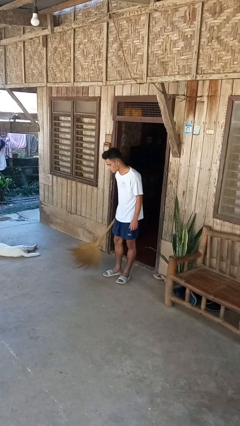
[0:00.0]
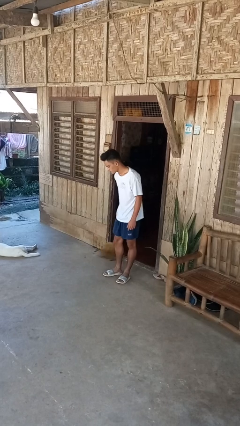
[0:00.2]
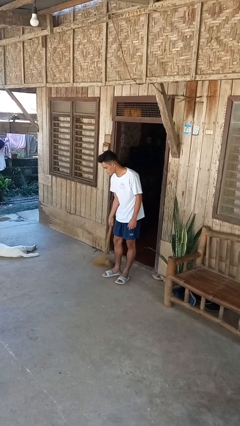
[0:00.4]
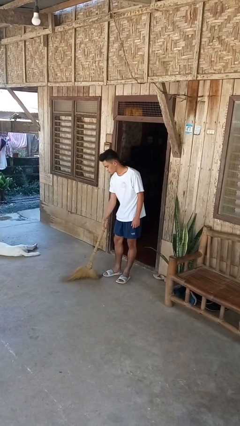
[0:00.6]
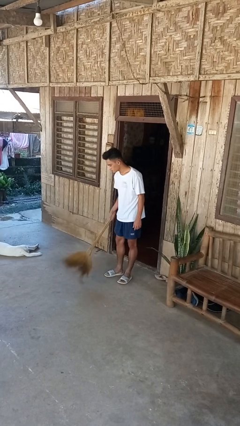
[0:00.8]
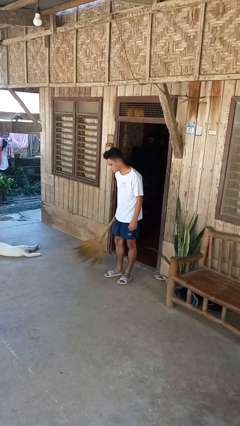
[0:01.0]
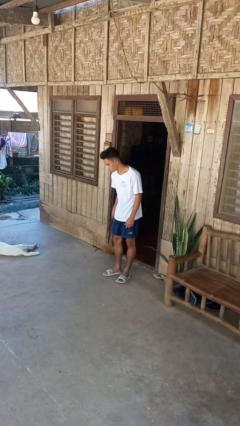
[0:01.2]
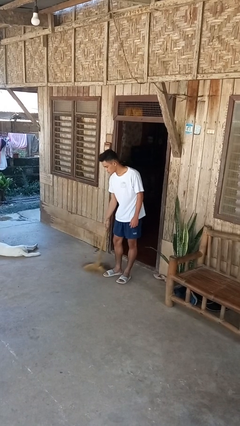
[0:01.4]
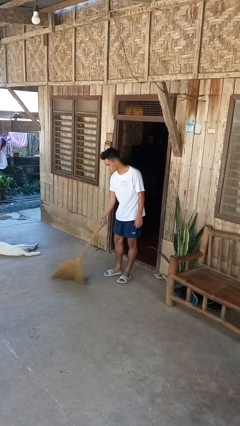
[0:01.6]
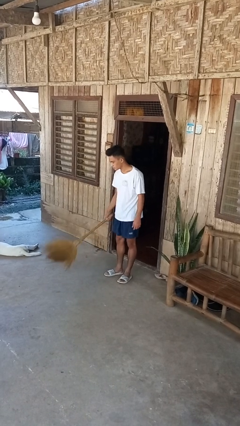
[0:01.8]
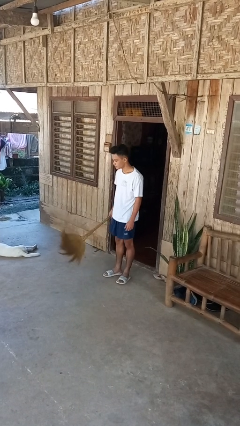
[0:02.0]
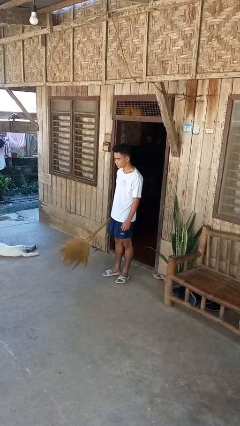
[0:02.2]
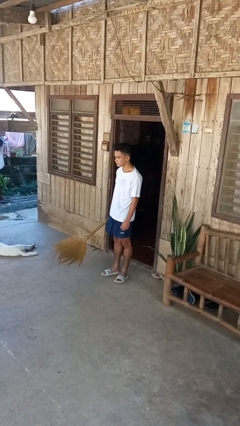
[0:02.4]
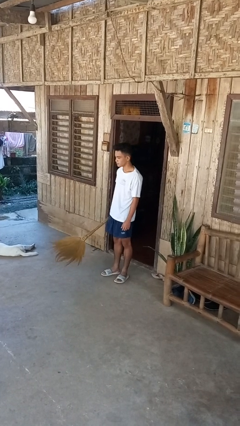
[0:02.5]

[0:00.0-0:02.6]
person sweeps floor

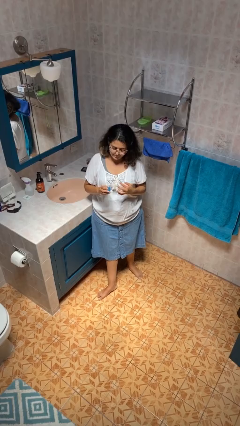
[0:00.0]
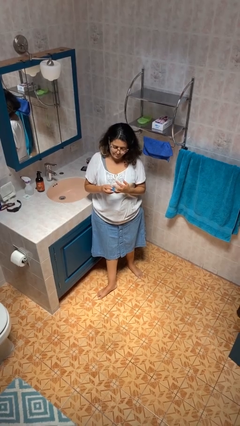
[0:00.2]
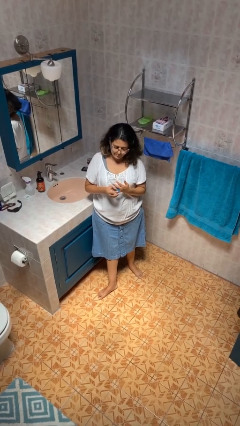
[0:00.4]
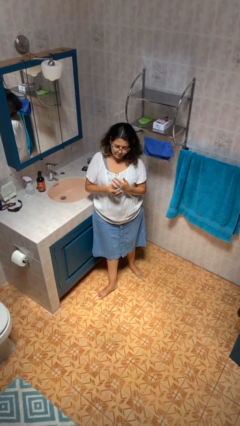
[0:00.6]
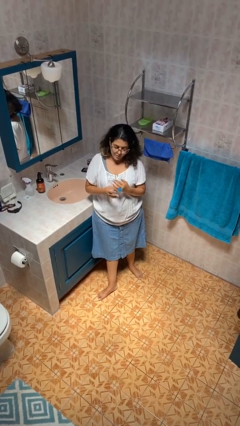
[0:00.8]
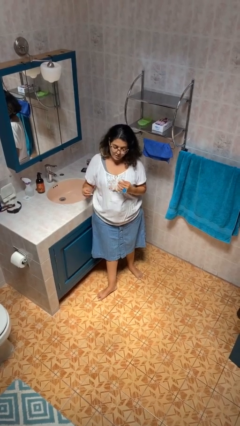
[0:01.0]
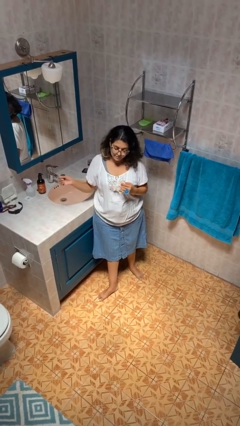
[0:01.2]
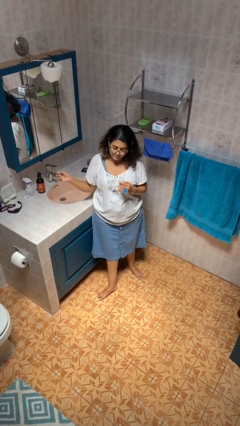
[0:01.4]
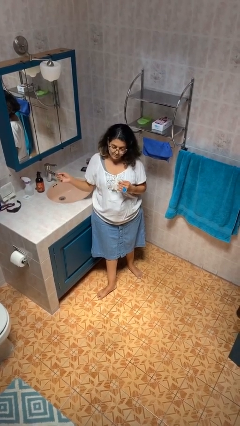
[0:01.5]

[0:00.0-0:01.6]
person puts on ring

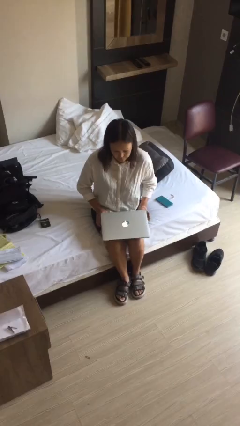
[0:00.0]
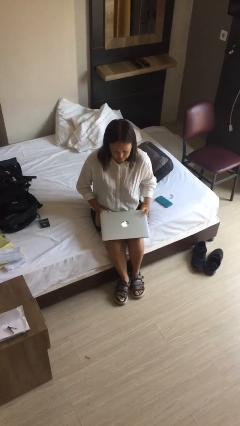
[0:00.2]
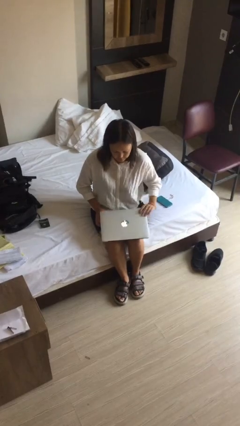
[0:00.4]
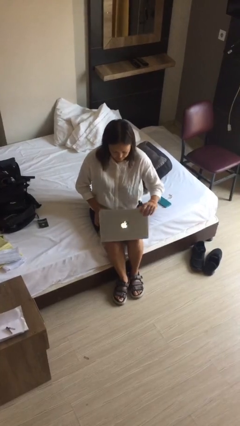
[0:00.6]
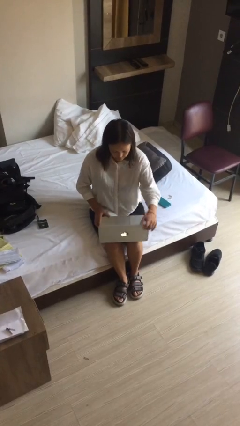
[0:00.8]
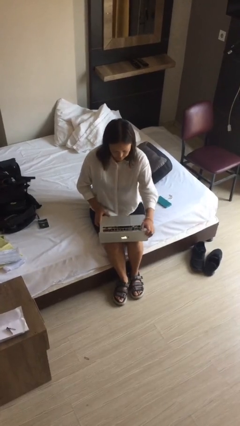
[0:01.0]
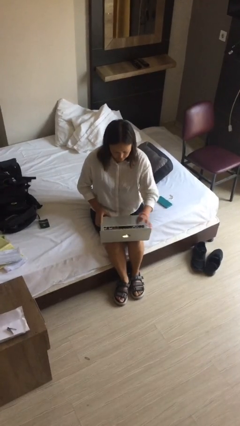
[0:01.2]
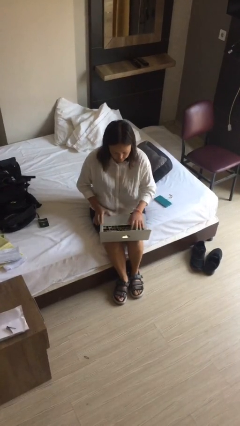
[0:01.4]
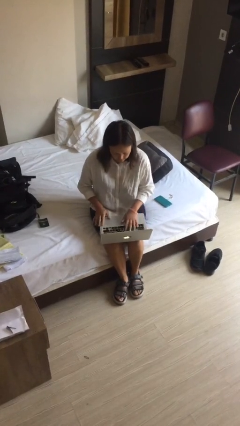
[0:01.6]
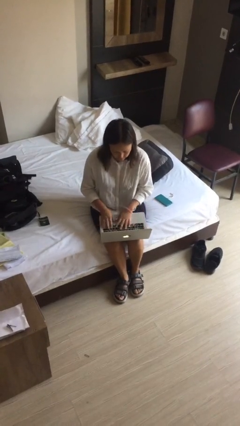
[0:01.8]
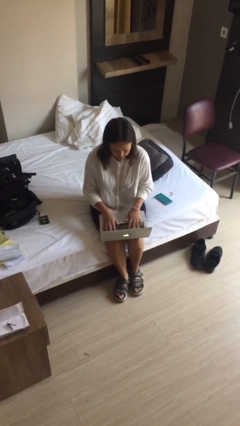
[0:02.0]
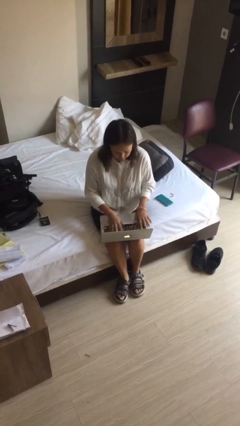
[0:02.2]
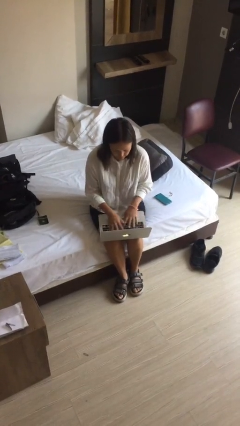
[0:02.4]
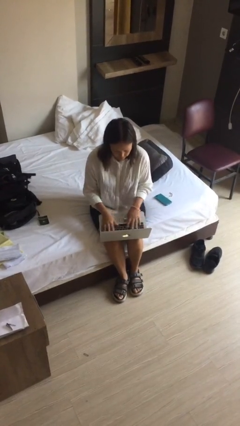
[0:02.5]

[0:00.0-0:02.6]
person opens laptop

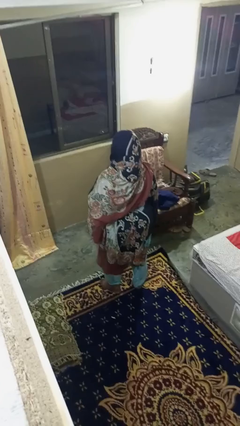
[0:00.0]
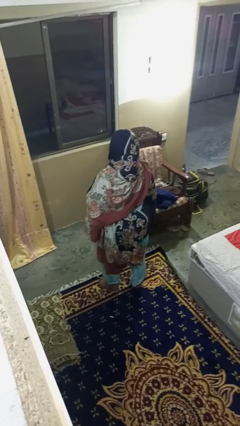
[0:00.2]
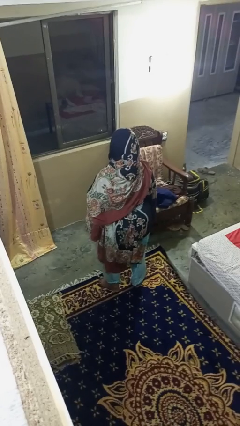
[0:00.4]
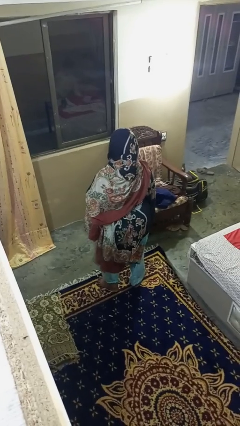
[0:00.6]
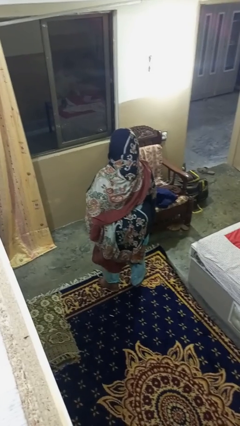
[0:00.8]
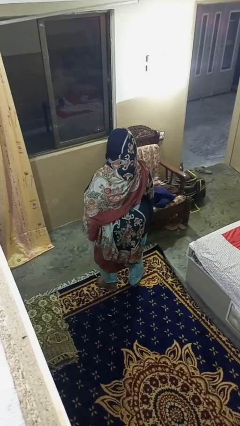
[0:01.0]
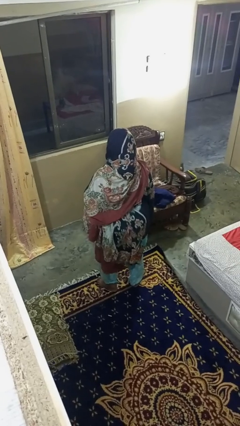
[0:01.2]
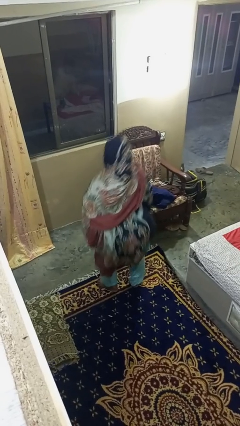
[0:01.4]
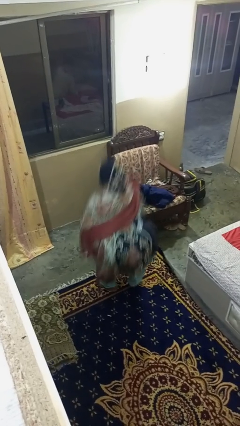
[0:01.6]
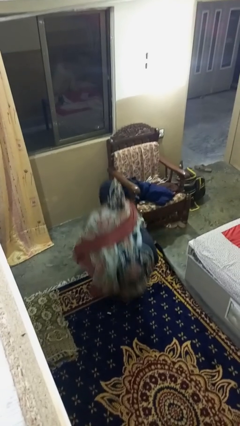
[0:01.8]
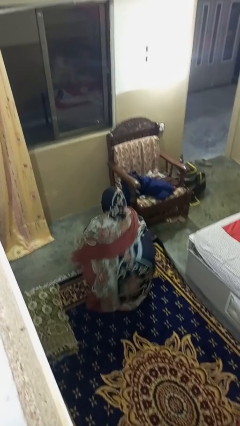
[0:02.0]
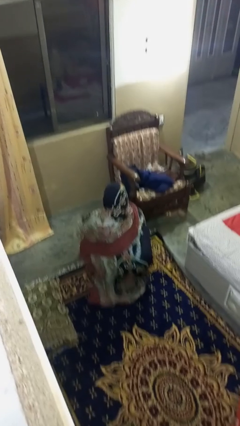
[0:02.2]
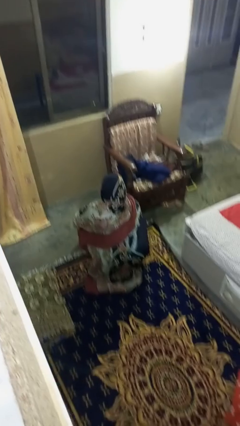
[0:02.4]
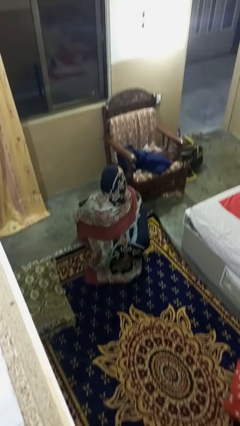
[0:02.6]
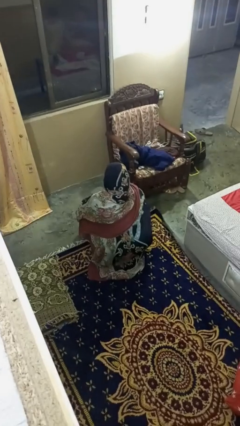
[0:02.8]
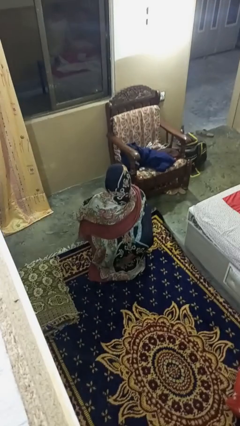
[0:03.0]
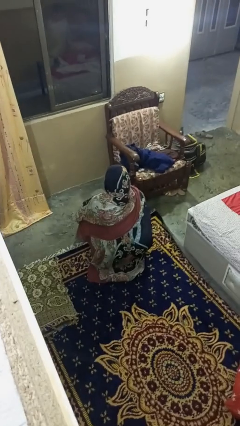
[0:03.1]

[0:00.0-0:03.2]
person squats

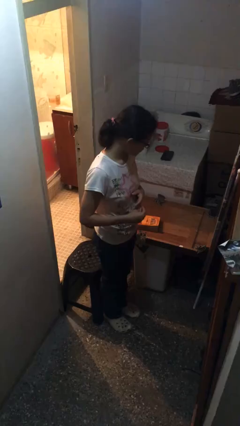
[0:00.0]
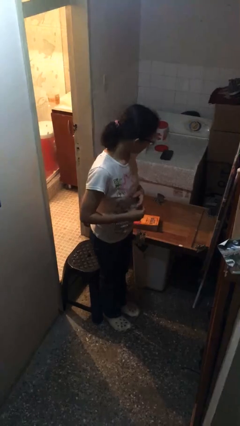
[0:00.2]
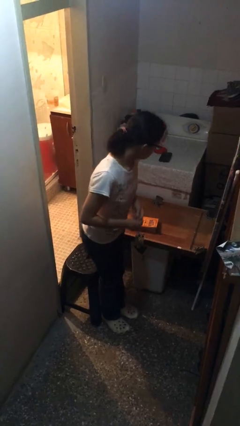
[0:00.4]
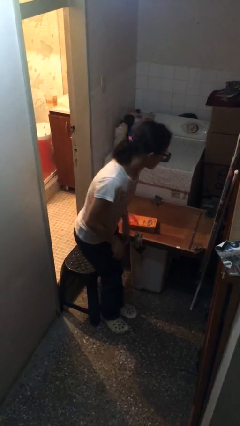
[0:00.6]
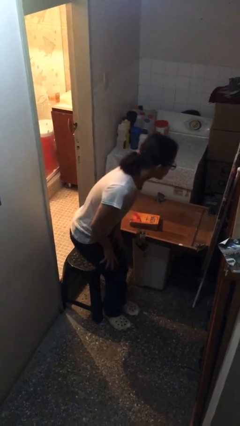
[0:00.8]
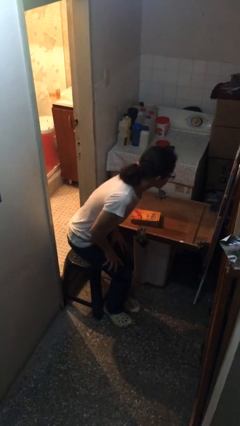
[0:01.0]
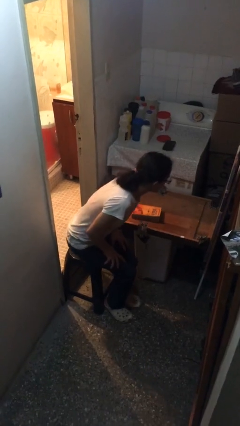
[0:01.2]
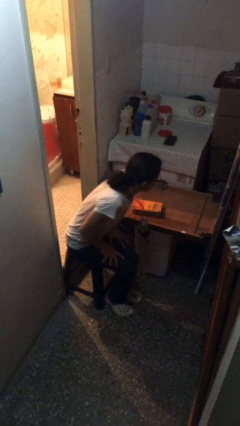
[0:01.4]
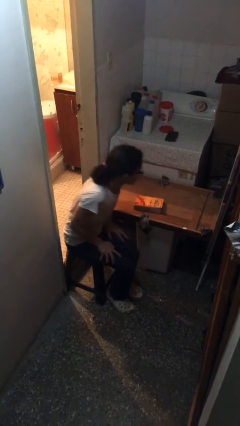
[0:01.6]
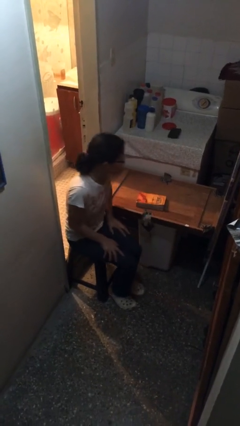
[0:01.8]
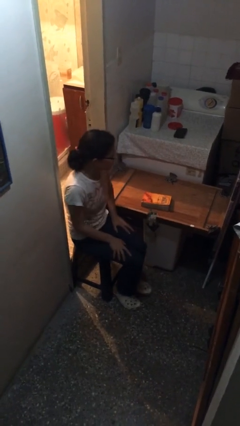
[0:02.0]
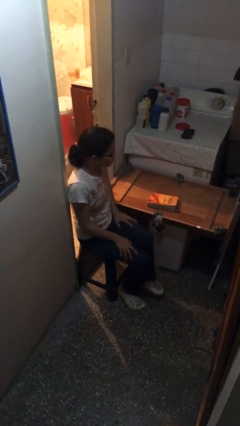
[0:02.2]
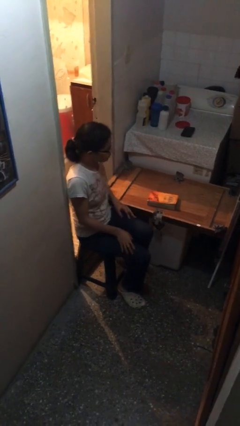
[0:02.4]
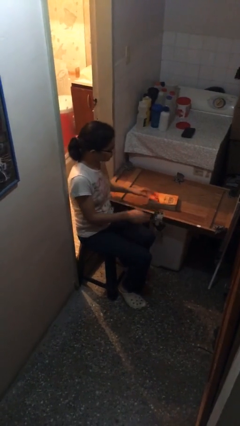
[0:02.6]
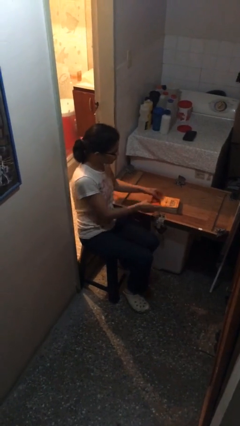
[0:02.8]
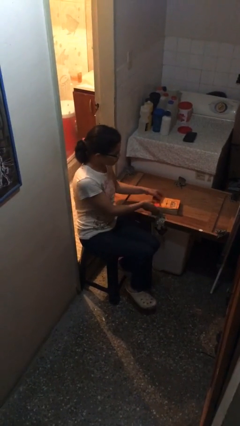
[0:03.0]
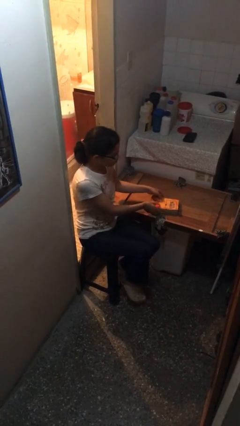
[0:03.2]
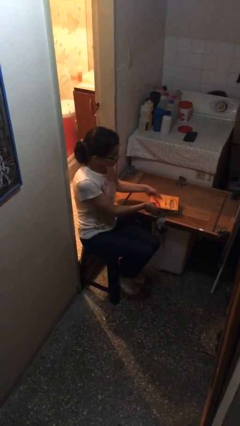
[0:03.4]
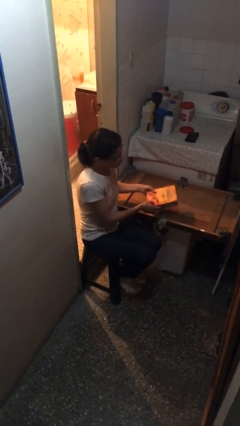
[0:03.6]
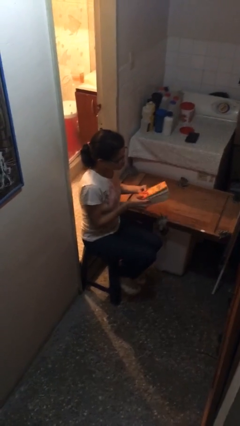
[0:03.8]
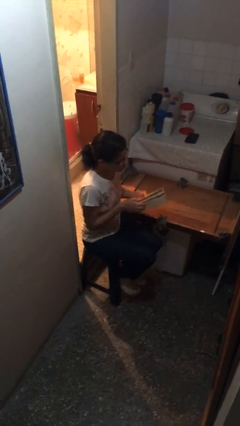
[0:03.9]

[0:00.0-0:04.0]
person sits down

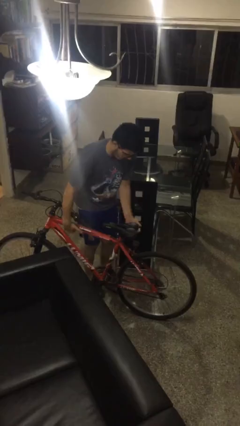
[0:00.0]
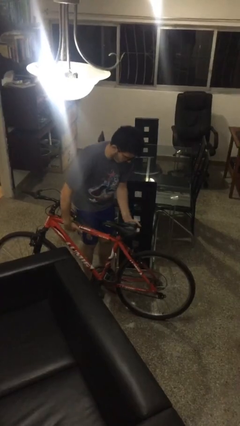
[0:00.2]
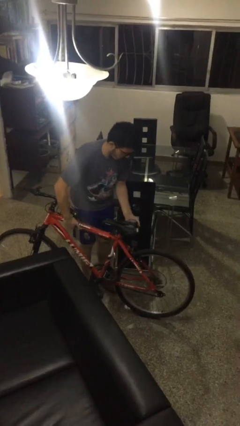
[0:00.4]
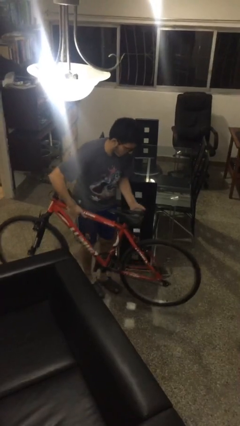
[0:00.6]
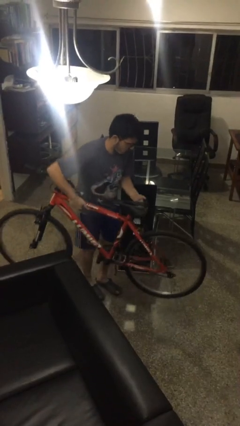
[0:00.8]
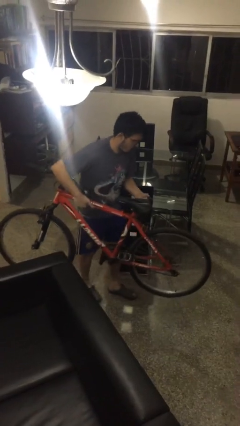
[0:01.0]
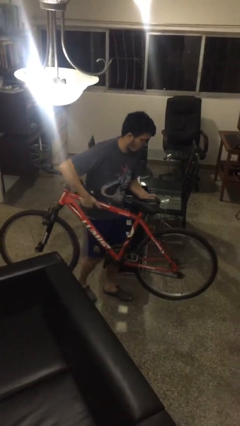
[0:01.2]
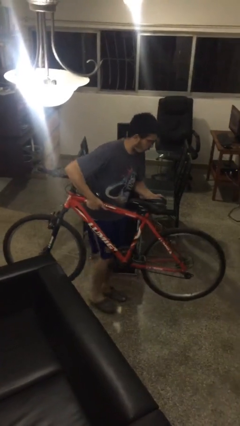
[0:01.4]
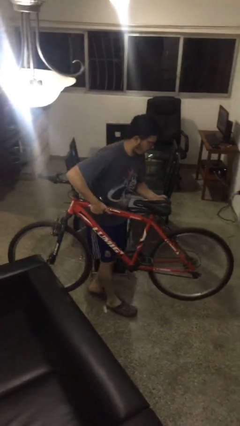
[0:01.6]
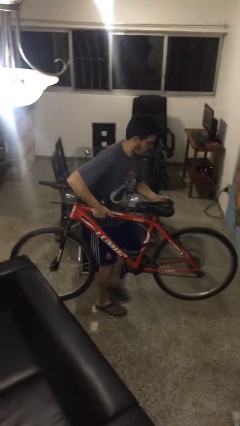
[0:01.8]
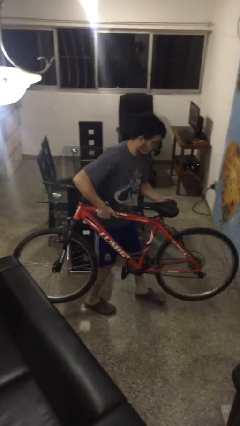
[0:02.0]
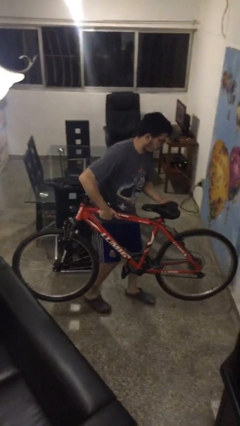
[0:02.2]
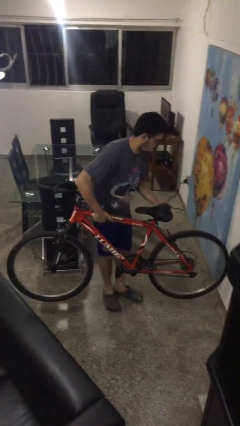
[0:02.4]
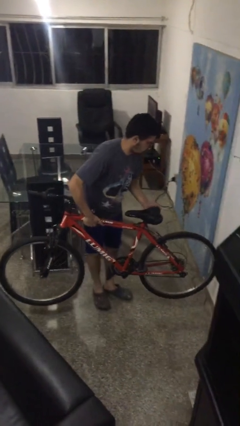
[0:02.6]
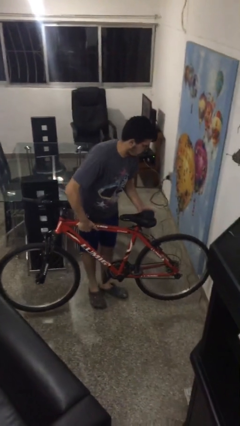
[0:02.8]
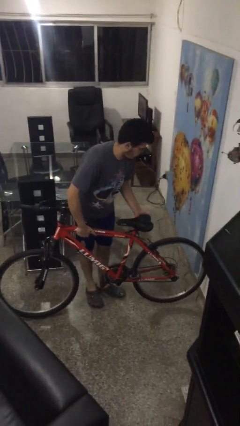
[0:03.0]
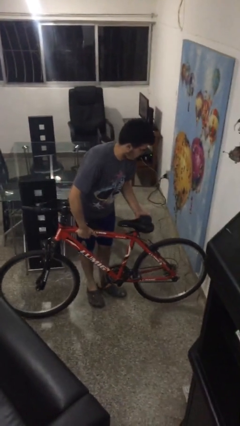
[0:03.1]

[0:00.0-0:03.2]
person carries bicycle

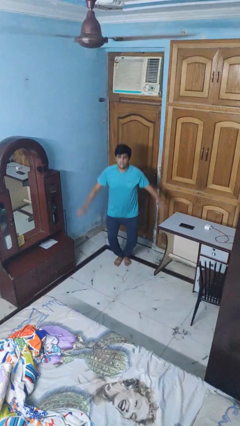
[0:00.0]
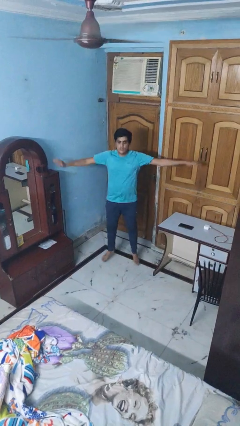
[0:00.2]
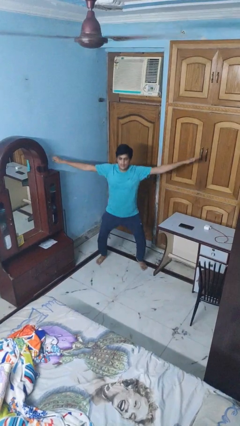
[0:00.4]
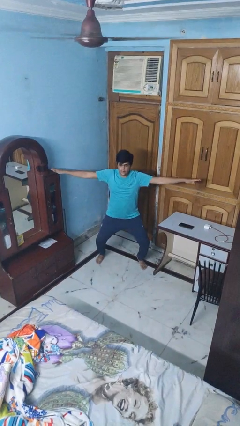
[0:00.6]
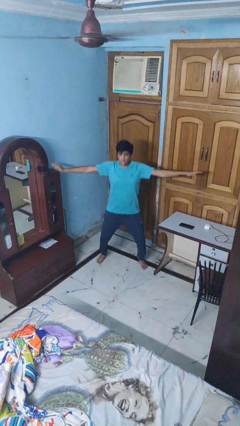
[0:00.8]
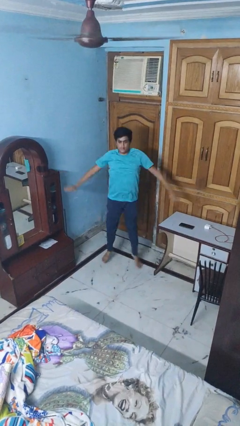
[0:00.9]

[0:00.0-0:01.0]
person exercises with jumping jacks
